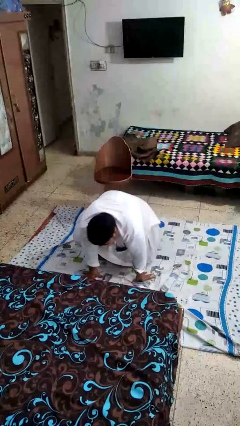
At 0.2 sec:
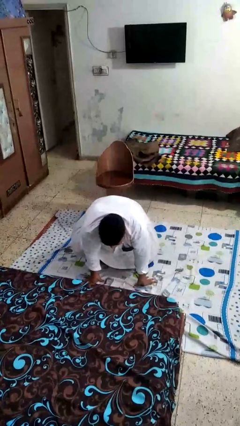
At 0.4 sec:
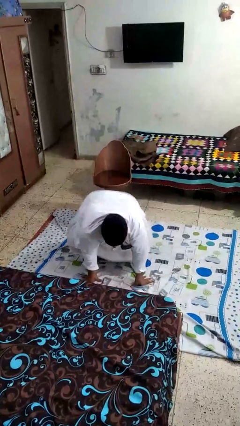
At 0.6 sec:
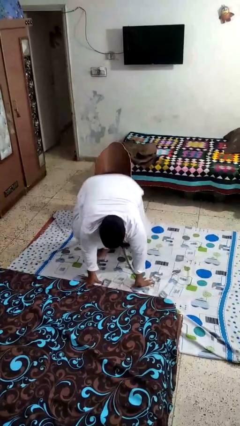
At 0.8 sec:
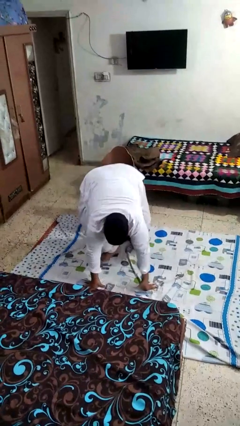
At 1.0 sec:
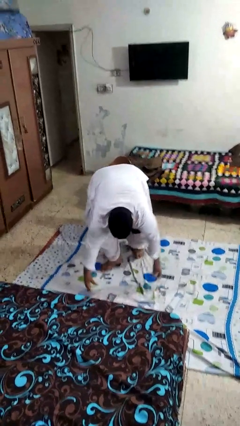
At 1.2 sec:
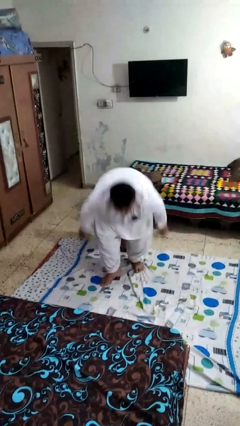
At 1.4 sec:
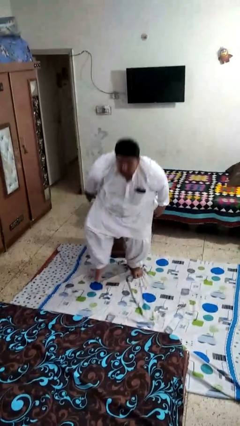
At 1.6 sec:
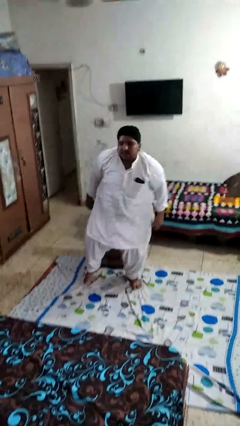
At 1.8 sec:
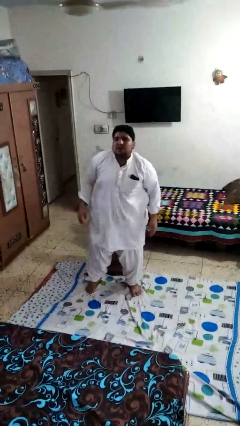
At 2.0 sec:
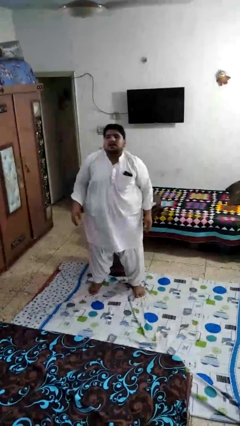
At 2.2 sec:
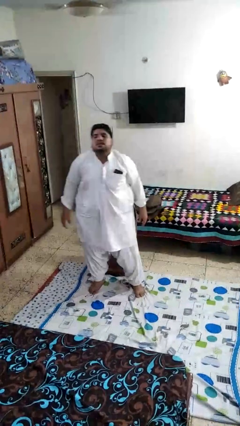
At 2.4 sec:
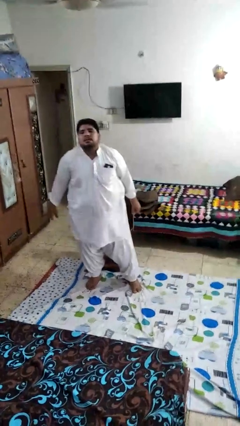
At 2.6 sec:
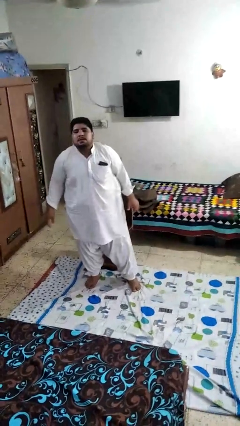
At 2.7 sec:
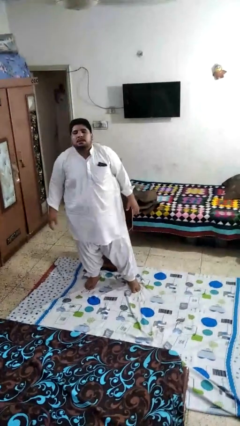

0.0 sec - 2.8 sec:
person stands up from floor

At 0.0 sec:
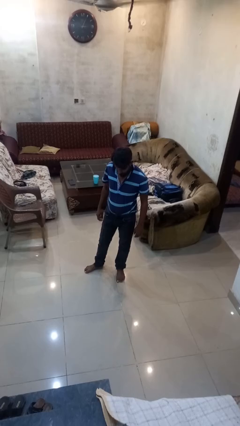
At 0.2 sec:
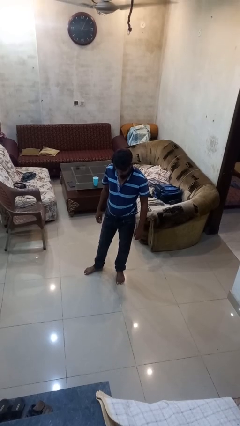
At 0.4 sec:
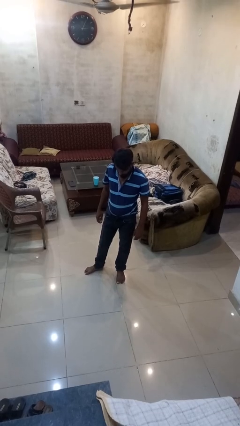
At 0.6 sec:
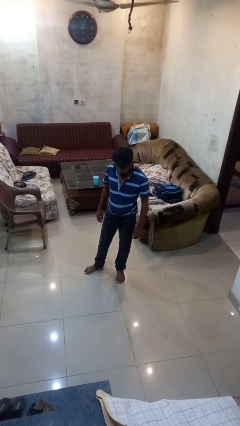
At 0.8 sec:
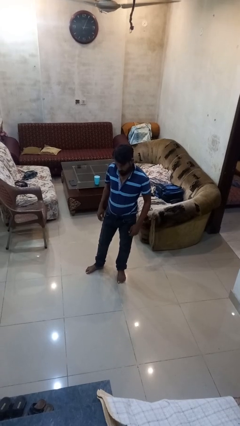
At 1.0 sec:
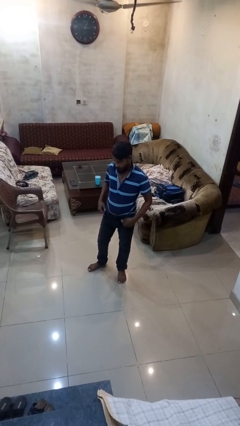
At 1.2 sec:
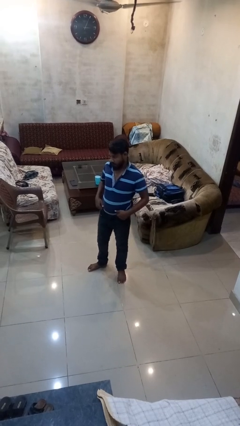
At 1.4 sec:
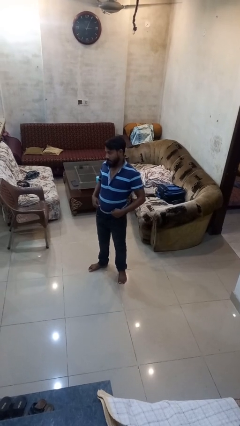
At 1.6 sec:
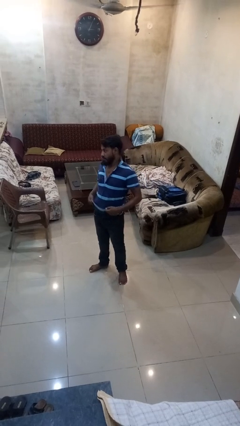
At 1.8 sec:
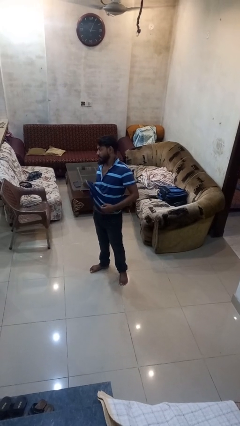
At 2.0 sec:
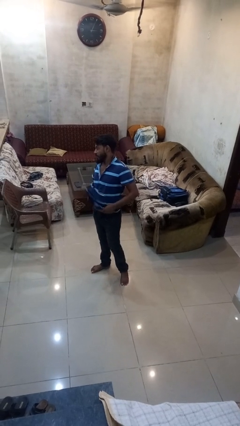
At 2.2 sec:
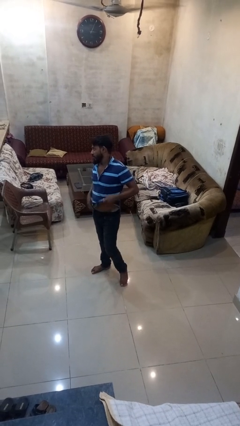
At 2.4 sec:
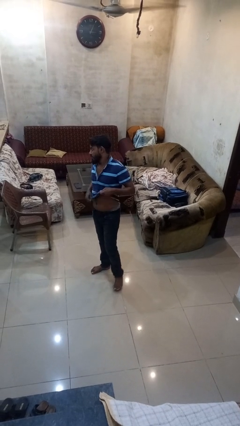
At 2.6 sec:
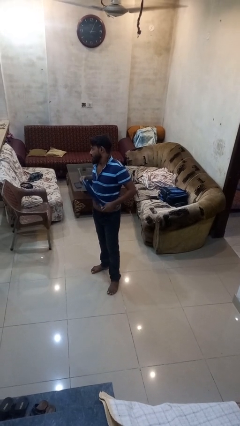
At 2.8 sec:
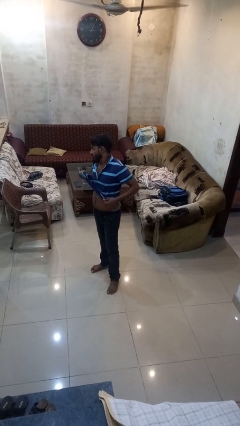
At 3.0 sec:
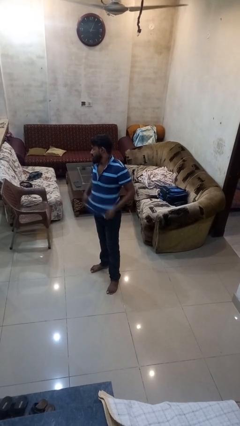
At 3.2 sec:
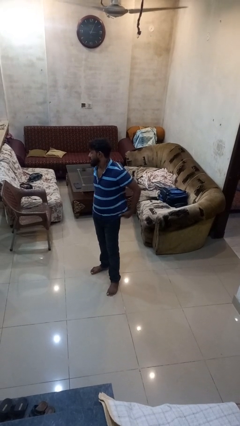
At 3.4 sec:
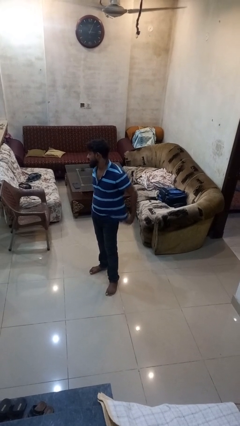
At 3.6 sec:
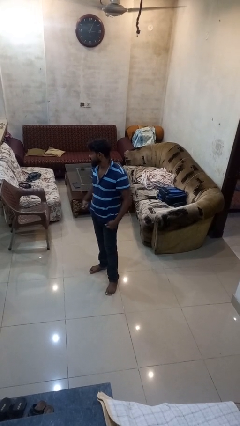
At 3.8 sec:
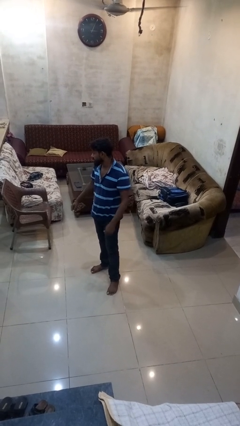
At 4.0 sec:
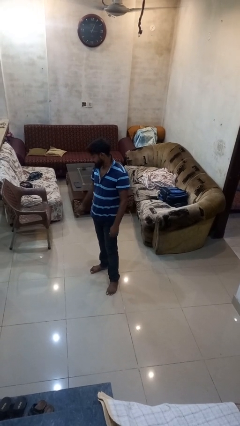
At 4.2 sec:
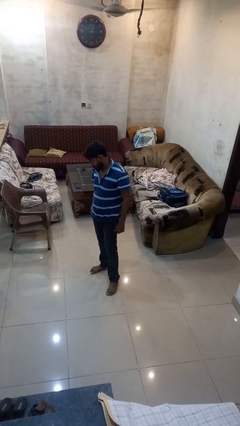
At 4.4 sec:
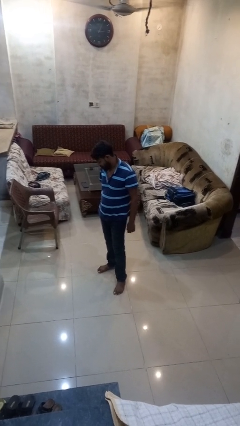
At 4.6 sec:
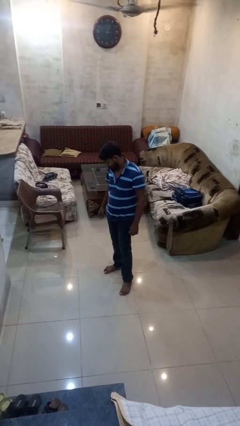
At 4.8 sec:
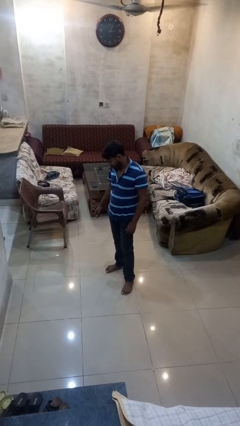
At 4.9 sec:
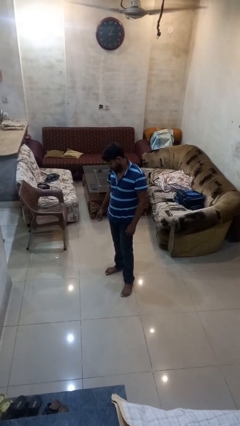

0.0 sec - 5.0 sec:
person untucks shirt

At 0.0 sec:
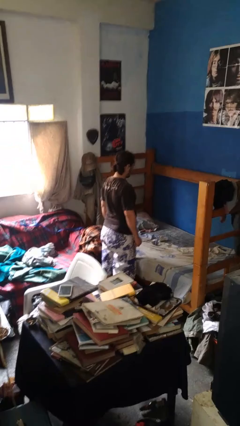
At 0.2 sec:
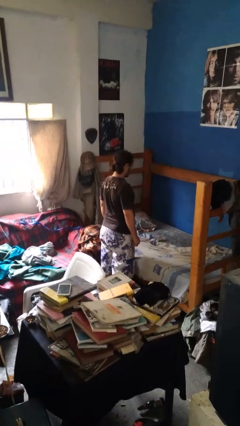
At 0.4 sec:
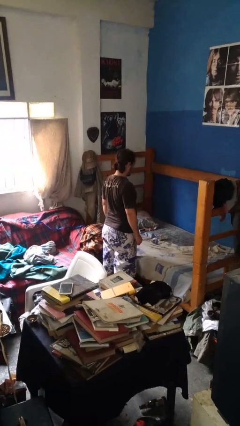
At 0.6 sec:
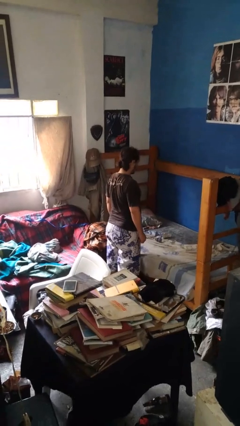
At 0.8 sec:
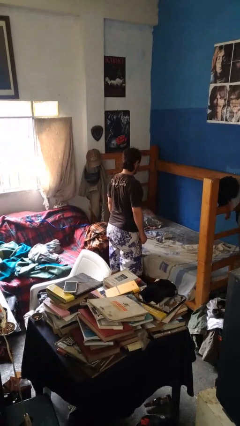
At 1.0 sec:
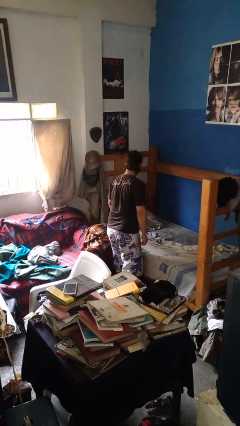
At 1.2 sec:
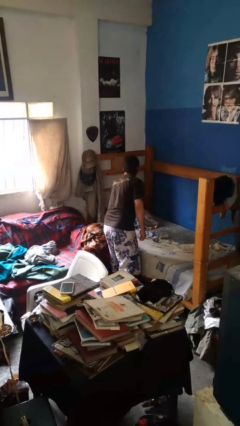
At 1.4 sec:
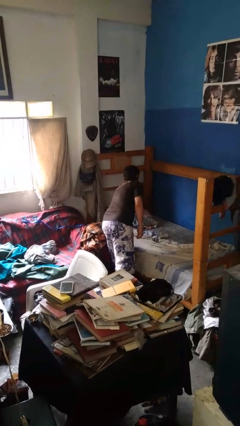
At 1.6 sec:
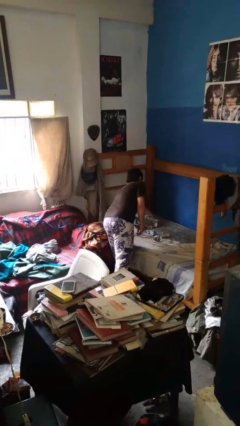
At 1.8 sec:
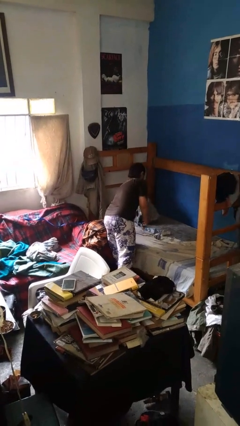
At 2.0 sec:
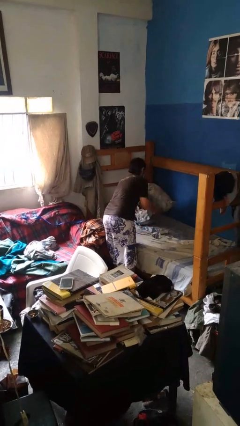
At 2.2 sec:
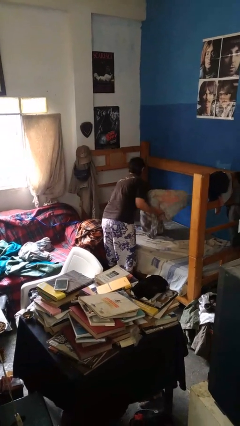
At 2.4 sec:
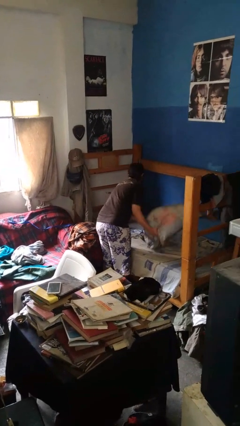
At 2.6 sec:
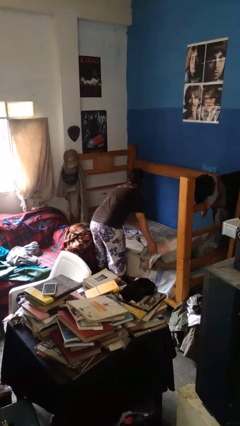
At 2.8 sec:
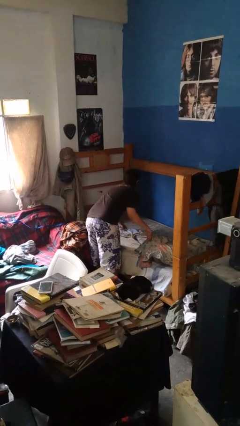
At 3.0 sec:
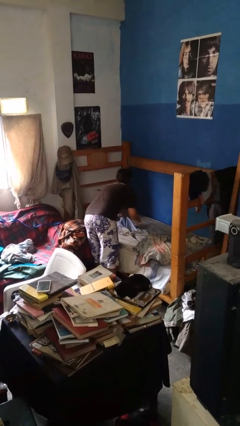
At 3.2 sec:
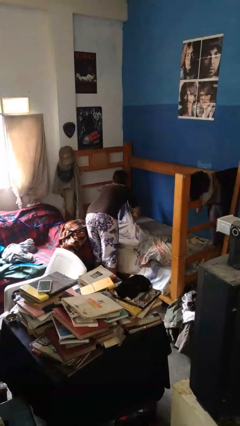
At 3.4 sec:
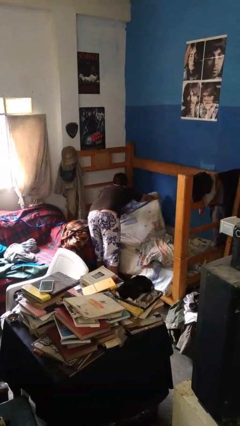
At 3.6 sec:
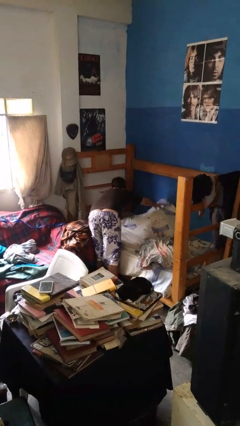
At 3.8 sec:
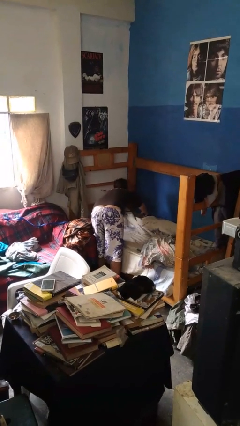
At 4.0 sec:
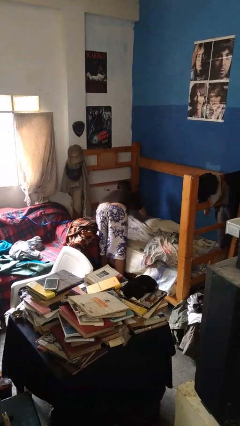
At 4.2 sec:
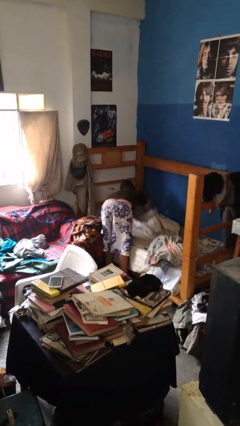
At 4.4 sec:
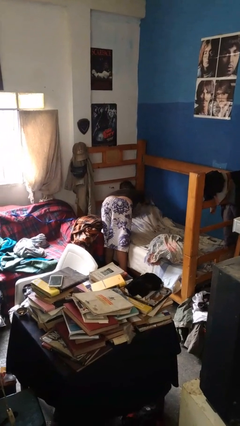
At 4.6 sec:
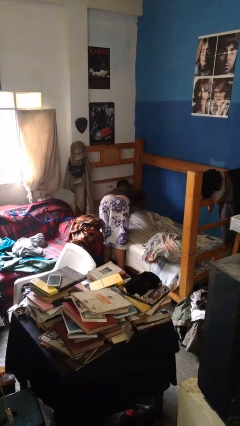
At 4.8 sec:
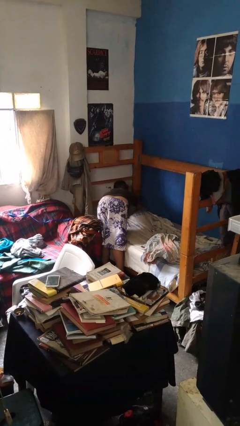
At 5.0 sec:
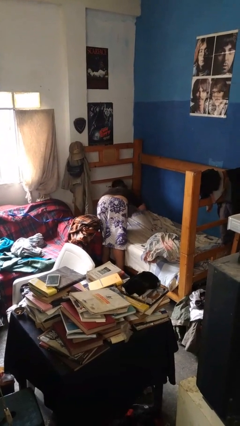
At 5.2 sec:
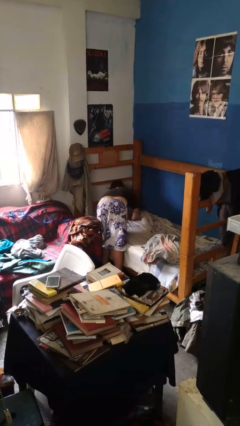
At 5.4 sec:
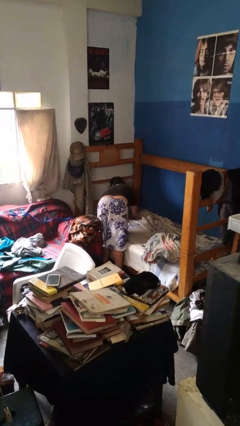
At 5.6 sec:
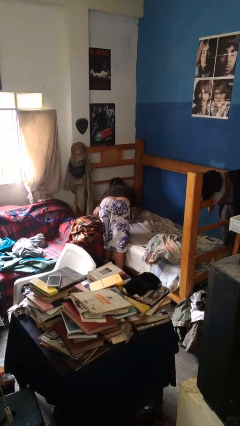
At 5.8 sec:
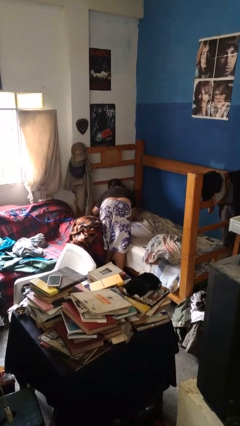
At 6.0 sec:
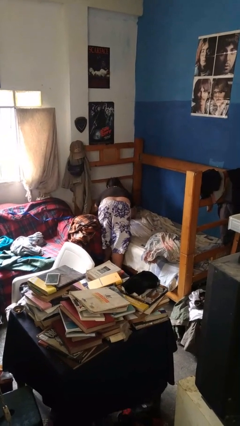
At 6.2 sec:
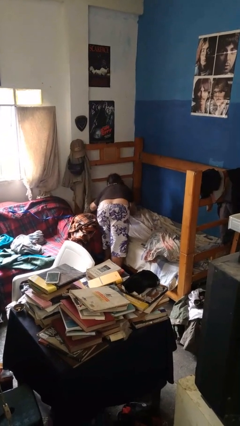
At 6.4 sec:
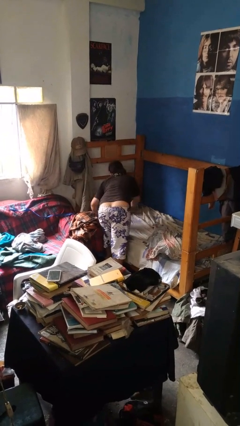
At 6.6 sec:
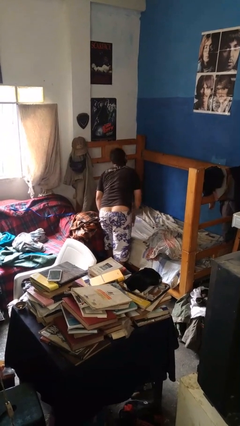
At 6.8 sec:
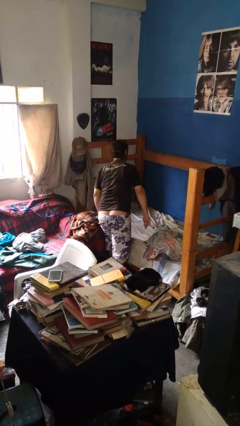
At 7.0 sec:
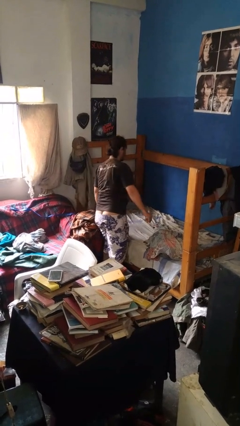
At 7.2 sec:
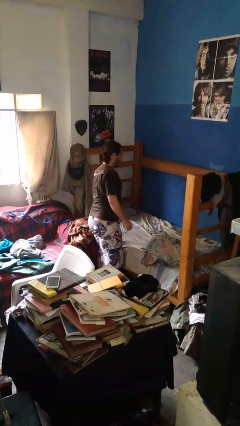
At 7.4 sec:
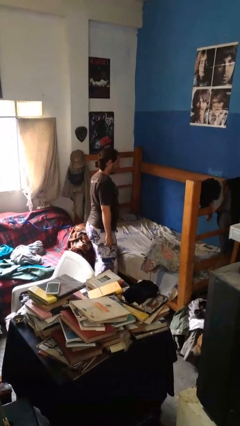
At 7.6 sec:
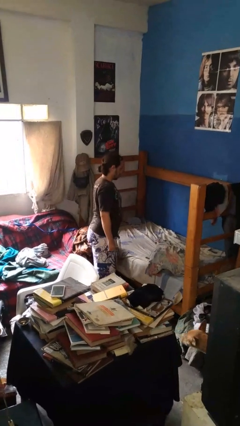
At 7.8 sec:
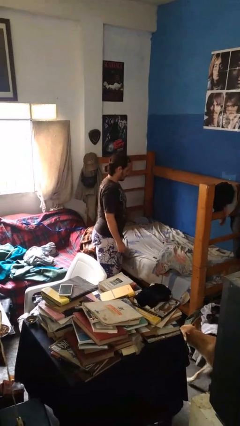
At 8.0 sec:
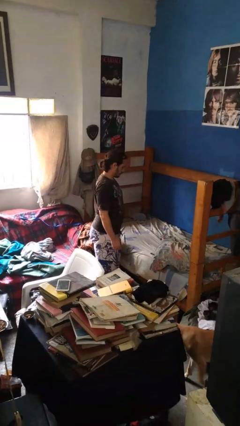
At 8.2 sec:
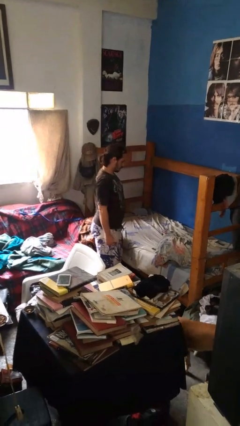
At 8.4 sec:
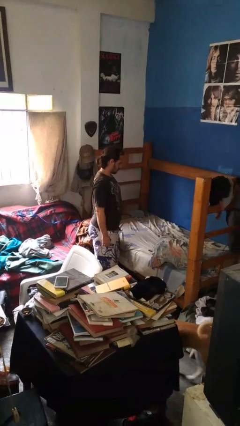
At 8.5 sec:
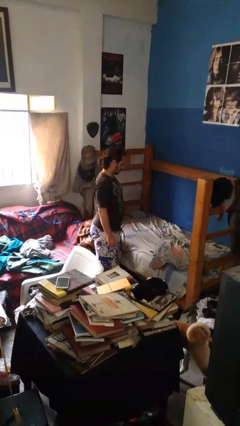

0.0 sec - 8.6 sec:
person makes bed

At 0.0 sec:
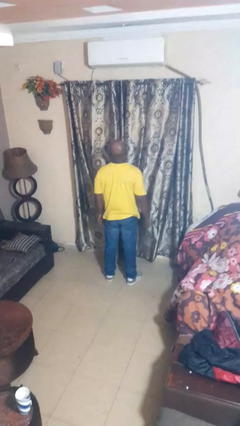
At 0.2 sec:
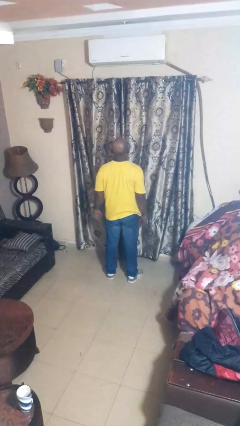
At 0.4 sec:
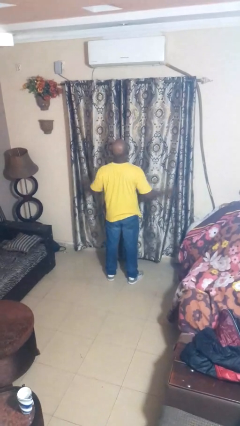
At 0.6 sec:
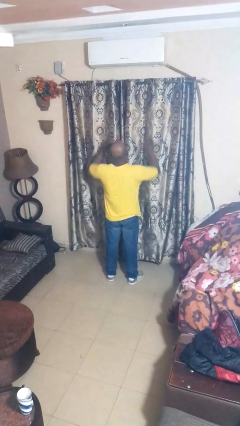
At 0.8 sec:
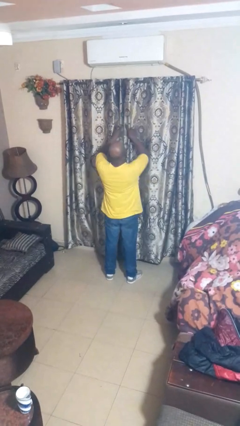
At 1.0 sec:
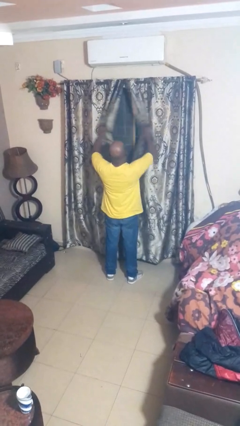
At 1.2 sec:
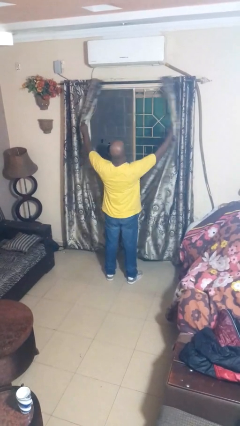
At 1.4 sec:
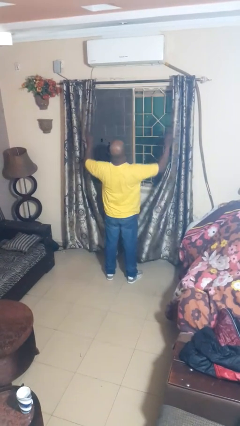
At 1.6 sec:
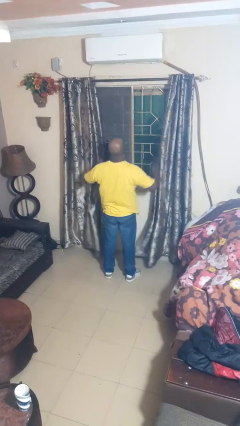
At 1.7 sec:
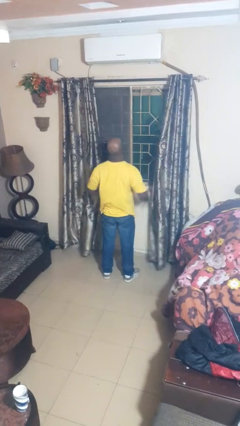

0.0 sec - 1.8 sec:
person opens curtains
